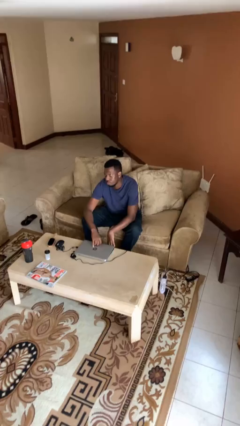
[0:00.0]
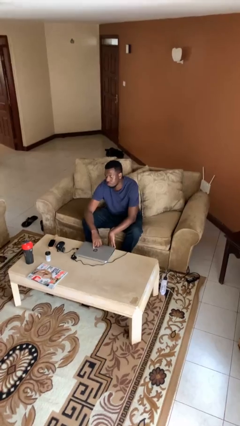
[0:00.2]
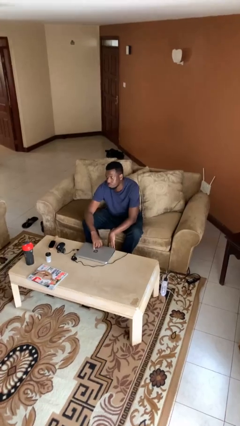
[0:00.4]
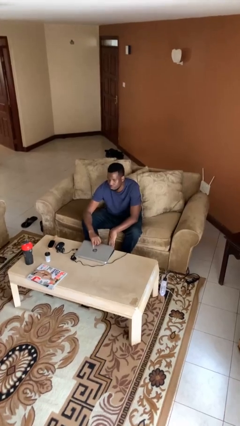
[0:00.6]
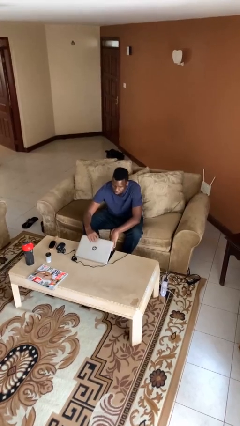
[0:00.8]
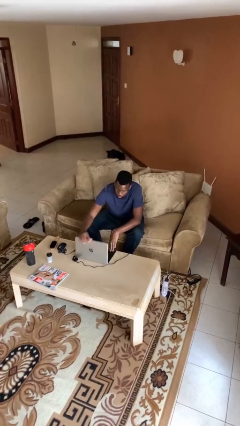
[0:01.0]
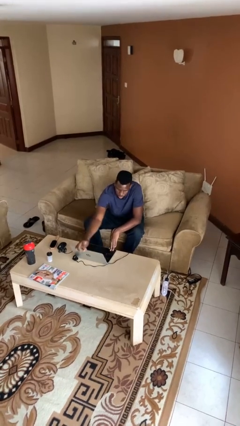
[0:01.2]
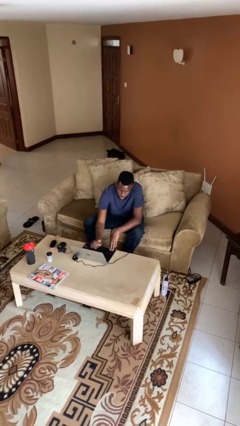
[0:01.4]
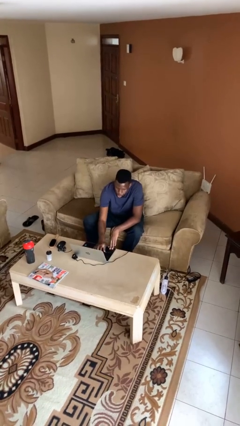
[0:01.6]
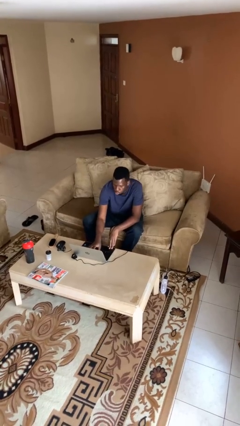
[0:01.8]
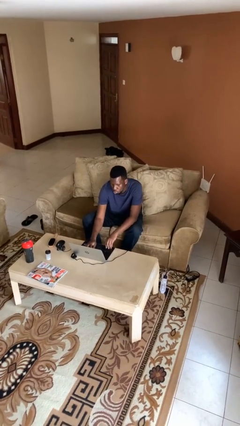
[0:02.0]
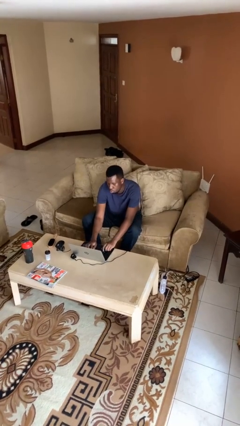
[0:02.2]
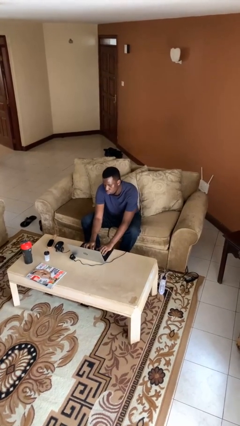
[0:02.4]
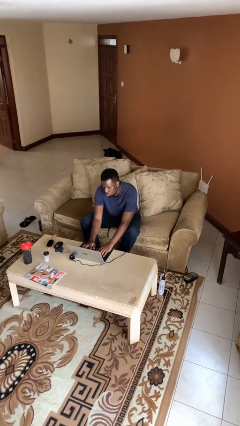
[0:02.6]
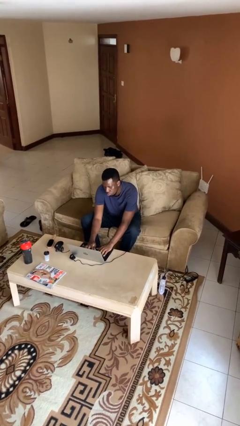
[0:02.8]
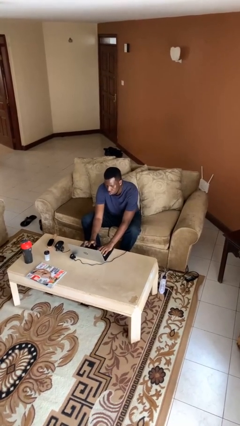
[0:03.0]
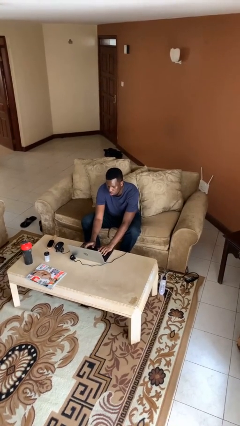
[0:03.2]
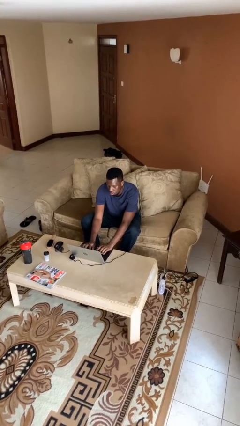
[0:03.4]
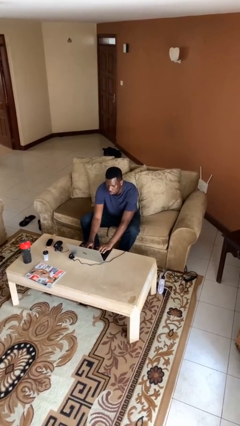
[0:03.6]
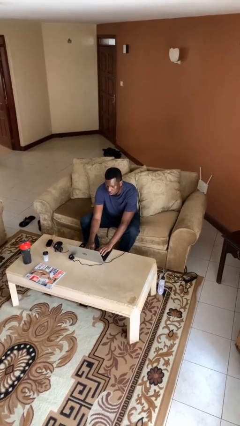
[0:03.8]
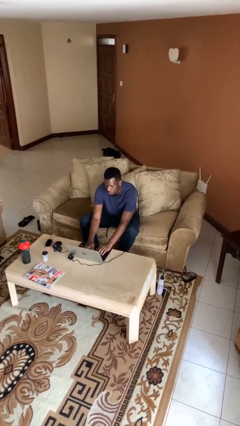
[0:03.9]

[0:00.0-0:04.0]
person interacts with laptop

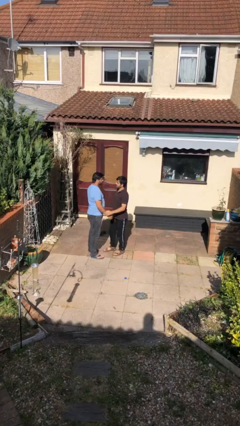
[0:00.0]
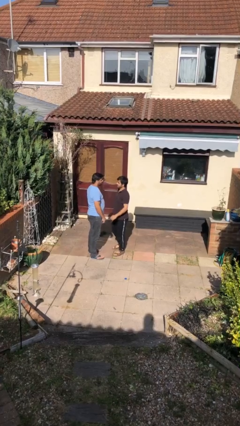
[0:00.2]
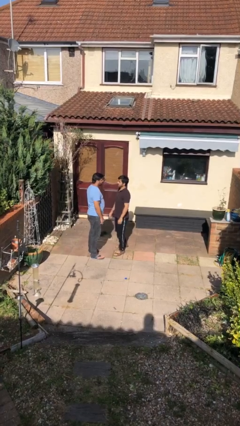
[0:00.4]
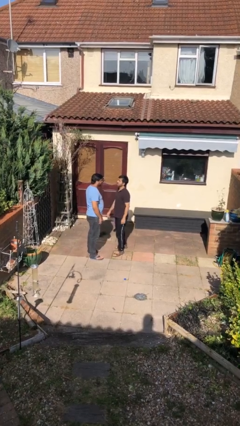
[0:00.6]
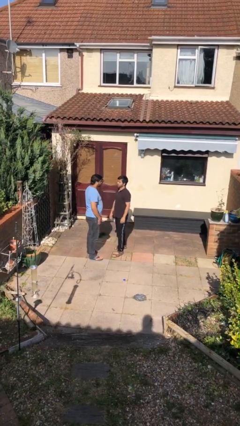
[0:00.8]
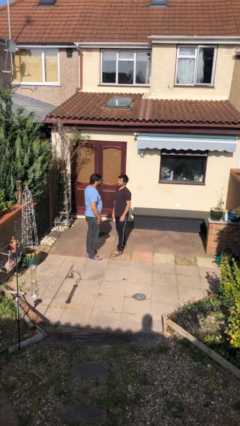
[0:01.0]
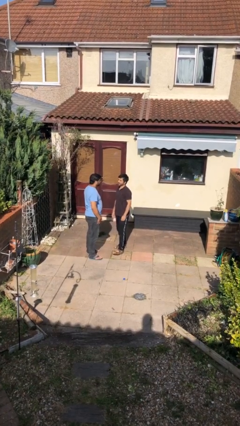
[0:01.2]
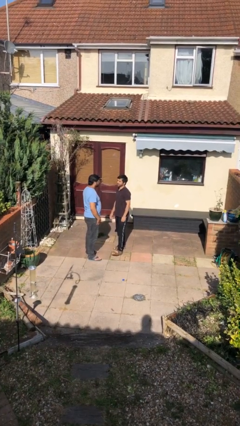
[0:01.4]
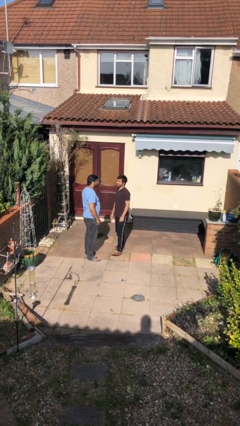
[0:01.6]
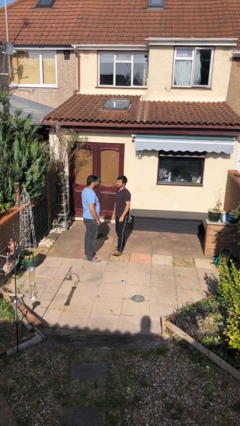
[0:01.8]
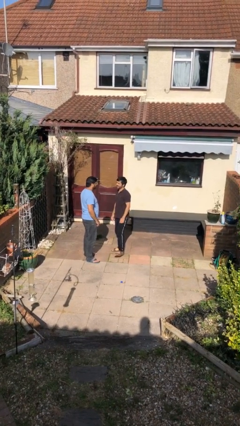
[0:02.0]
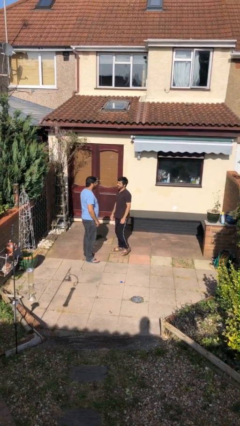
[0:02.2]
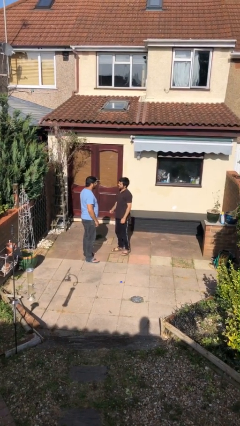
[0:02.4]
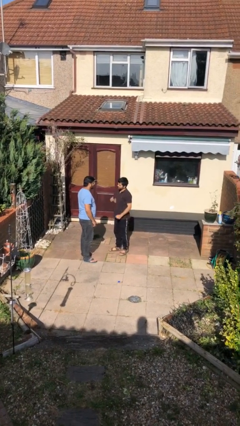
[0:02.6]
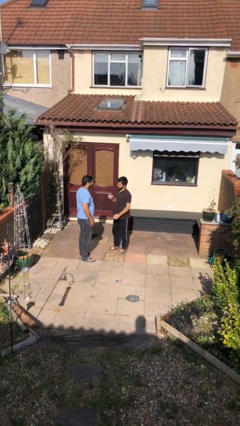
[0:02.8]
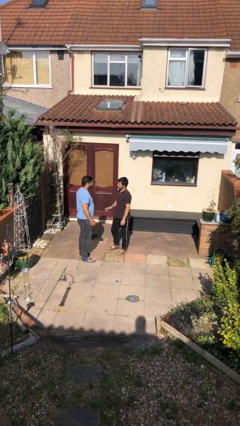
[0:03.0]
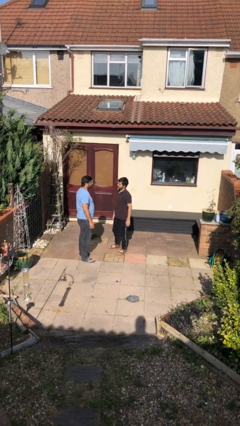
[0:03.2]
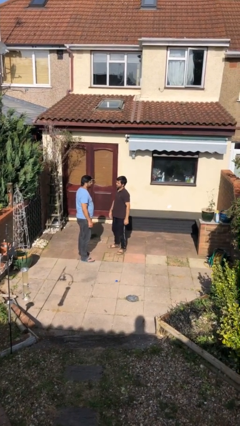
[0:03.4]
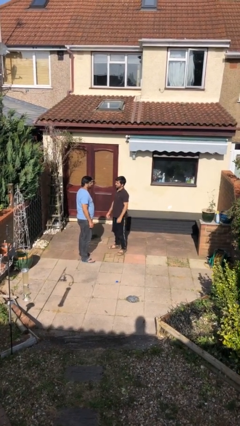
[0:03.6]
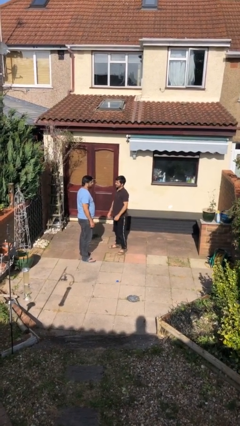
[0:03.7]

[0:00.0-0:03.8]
person talks to person

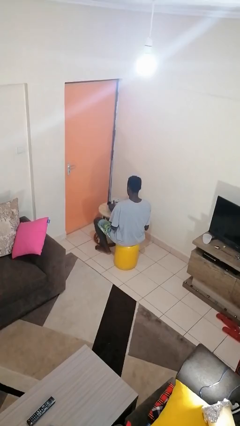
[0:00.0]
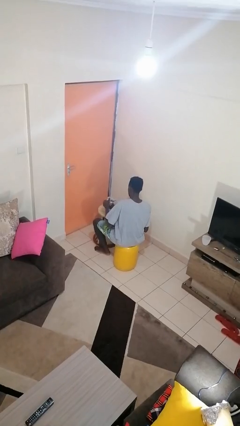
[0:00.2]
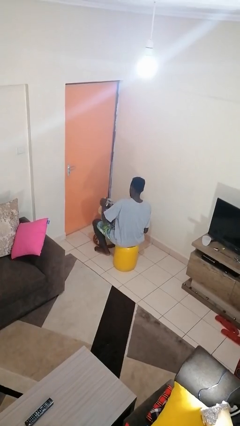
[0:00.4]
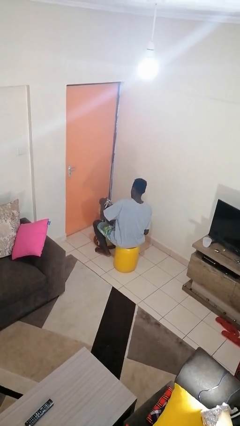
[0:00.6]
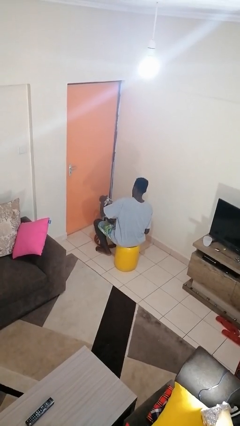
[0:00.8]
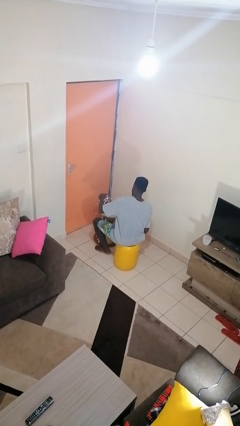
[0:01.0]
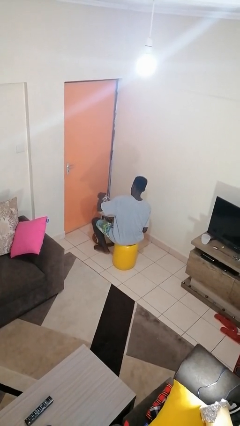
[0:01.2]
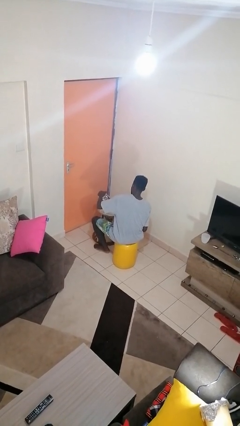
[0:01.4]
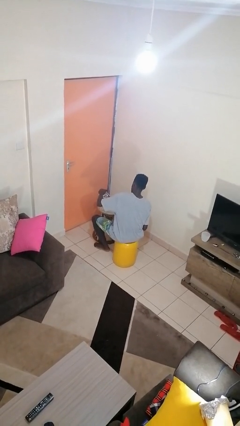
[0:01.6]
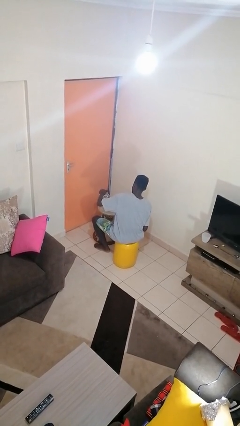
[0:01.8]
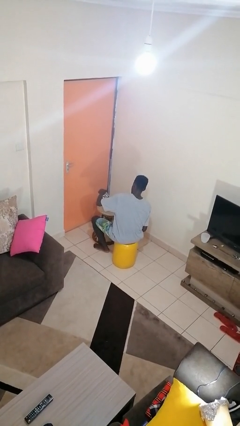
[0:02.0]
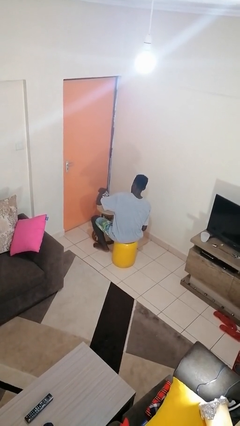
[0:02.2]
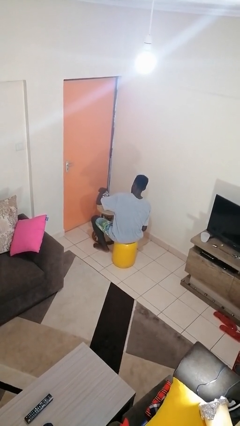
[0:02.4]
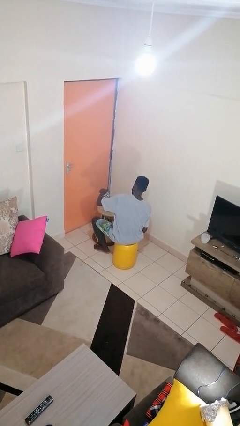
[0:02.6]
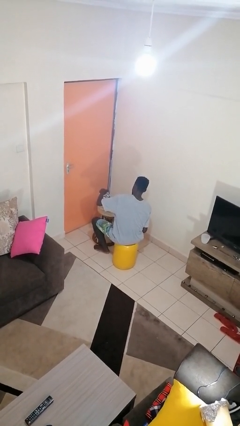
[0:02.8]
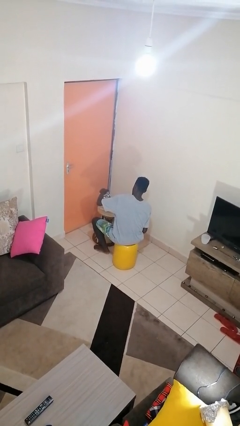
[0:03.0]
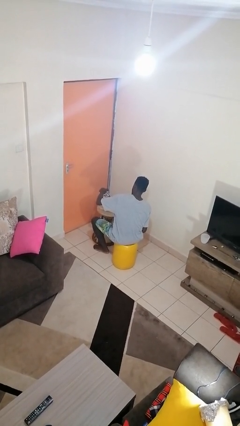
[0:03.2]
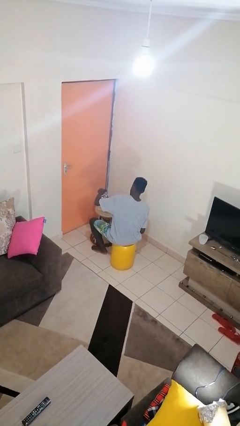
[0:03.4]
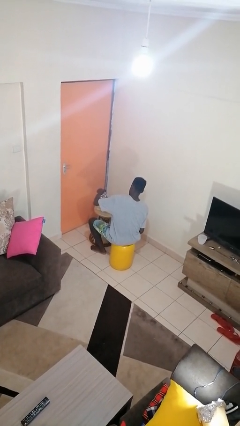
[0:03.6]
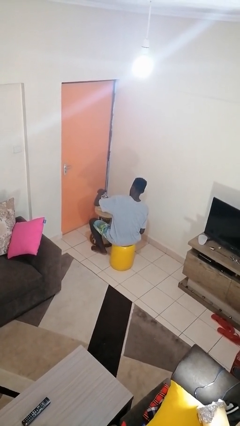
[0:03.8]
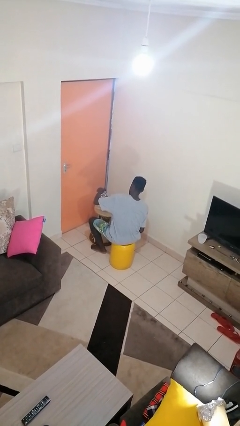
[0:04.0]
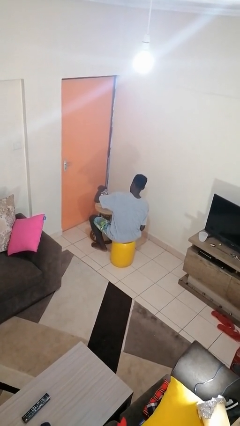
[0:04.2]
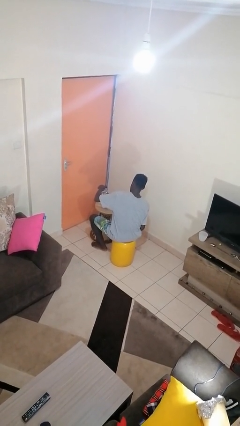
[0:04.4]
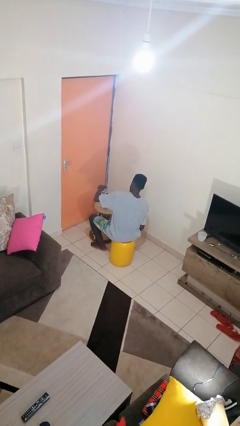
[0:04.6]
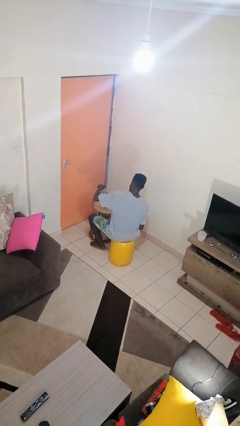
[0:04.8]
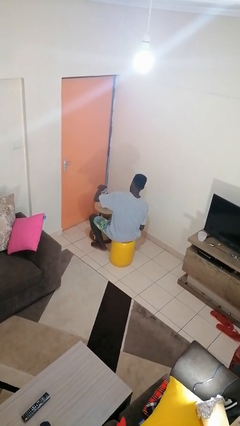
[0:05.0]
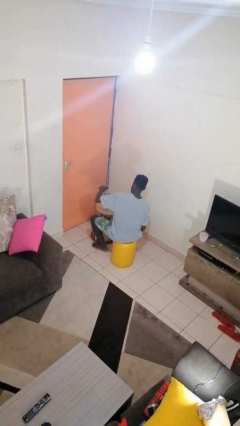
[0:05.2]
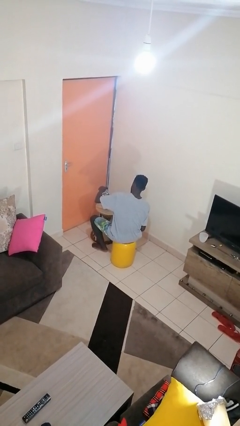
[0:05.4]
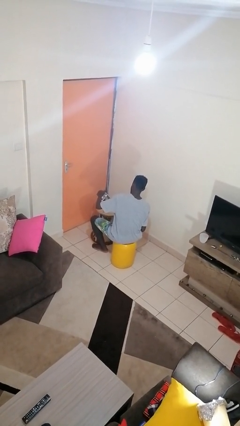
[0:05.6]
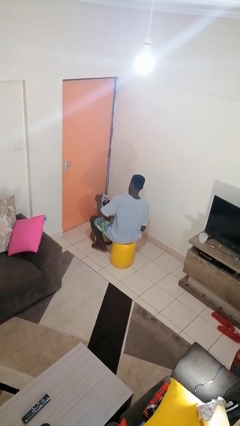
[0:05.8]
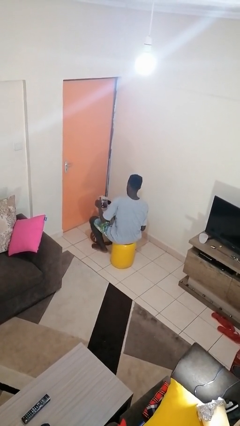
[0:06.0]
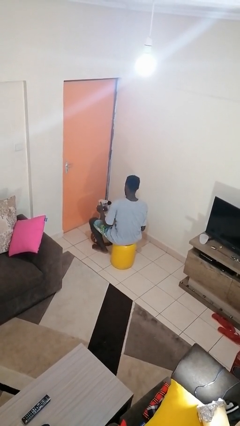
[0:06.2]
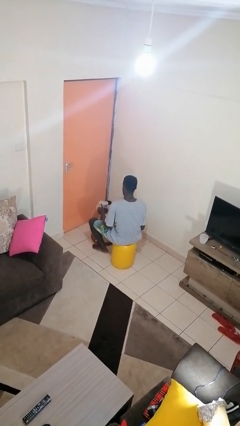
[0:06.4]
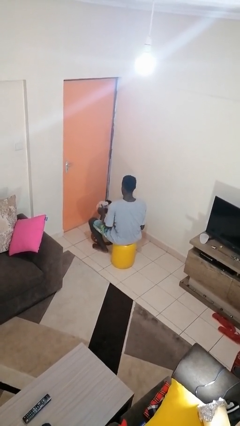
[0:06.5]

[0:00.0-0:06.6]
person pours coffee into mug

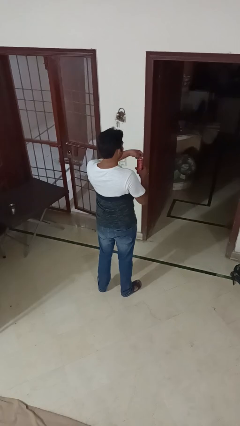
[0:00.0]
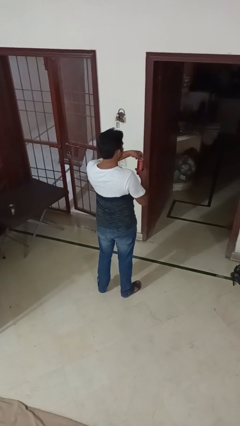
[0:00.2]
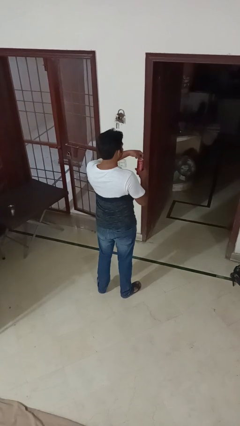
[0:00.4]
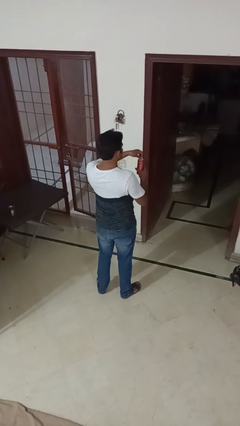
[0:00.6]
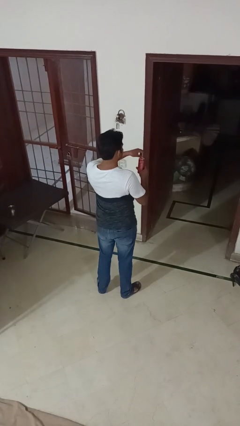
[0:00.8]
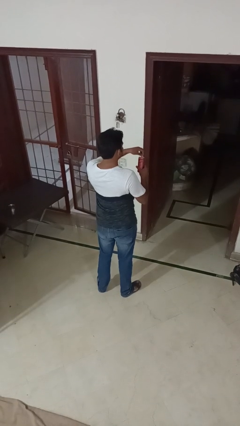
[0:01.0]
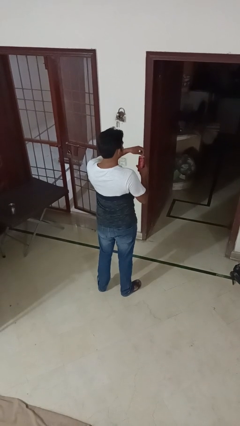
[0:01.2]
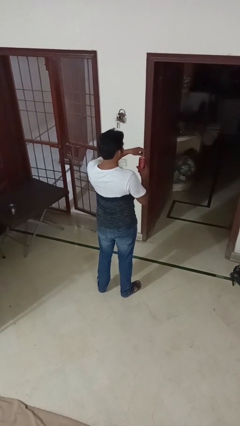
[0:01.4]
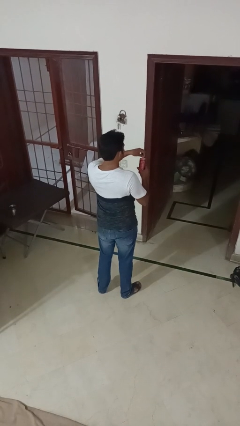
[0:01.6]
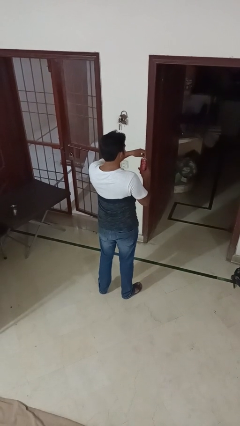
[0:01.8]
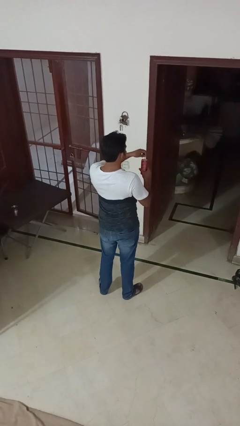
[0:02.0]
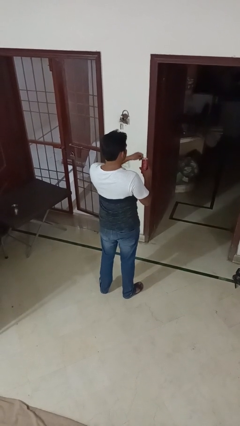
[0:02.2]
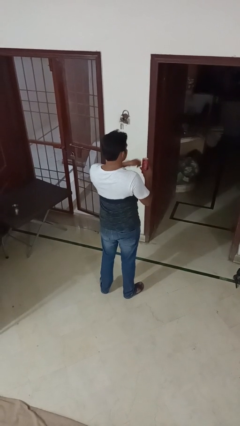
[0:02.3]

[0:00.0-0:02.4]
person opens beverage can

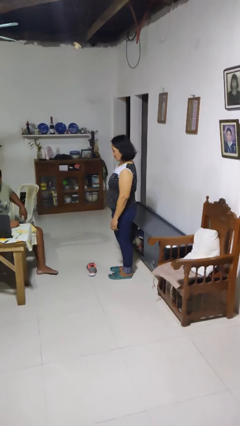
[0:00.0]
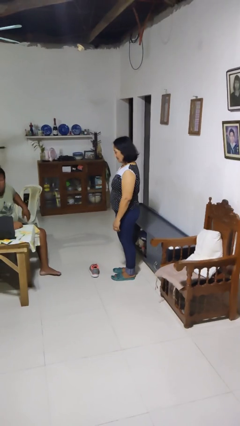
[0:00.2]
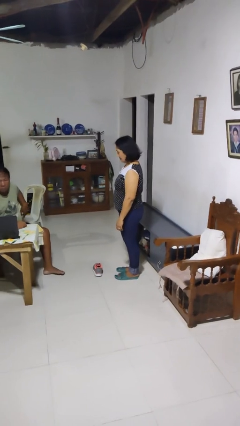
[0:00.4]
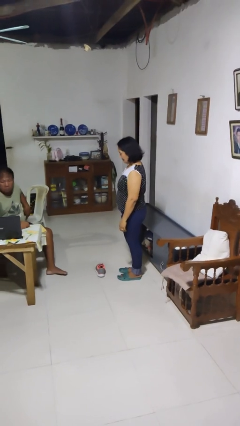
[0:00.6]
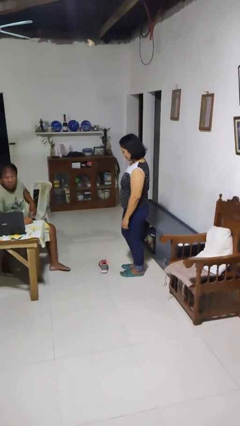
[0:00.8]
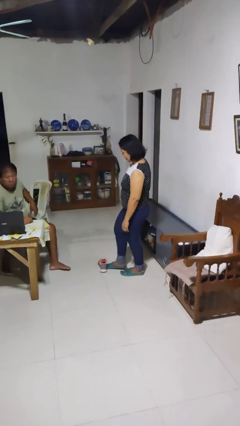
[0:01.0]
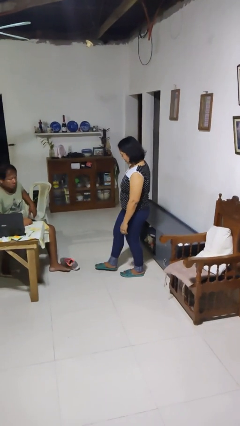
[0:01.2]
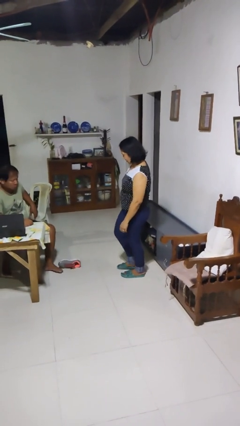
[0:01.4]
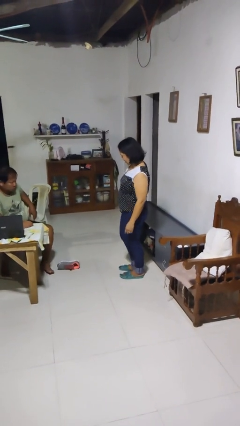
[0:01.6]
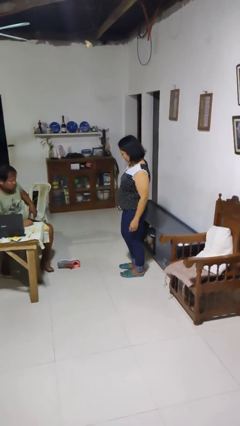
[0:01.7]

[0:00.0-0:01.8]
person kicks object to person
